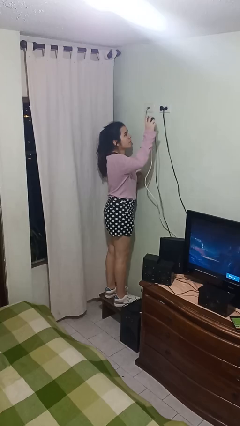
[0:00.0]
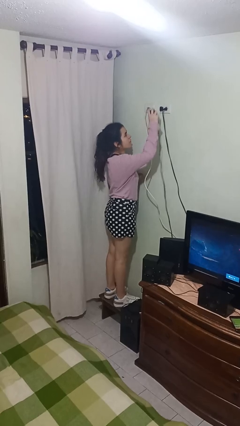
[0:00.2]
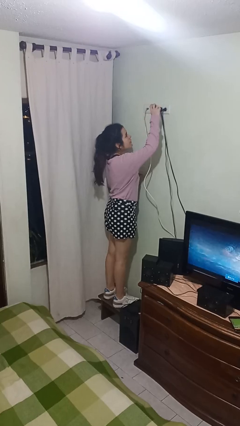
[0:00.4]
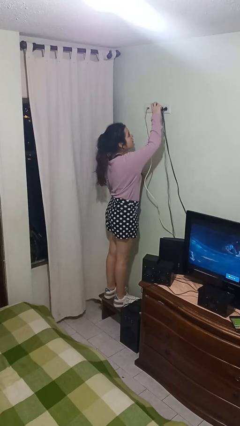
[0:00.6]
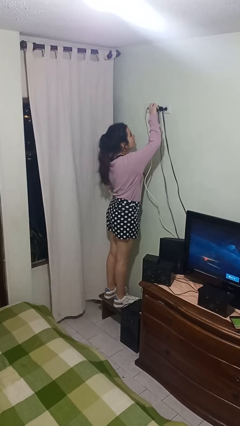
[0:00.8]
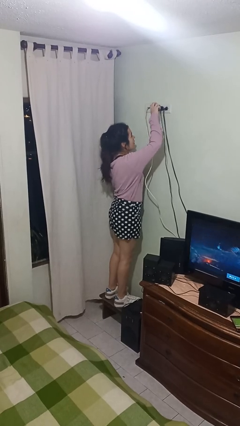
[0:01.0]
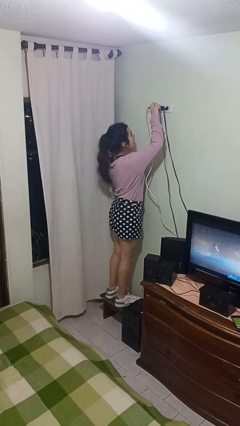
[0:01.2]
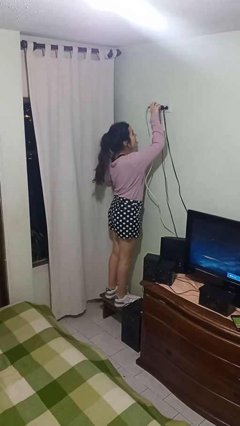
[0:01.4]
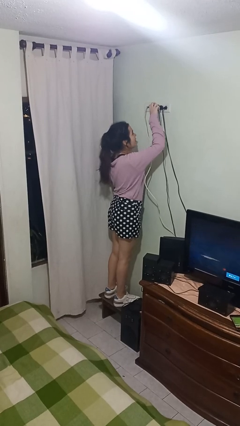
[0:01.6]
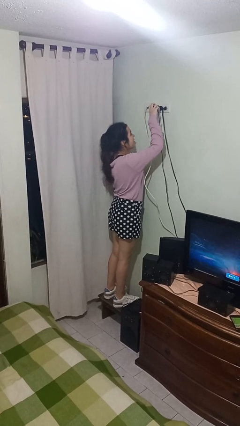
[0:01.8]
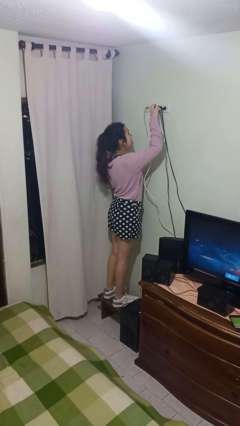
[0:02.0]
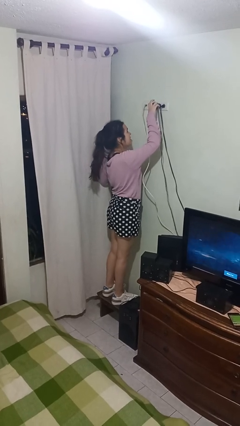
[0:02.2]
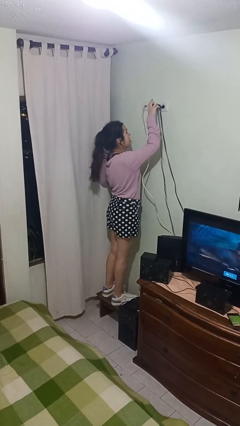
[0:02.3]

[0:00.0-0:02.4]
person plugs into electrical socket

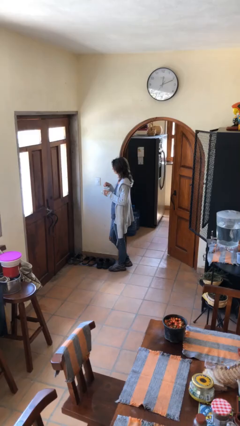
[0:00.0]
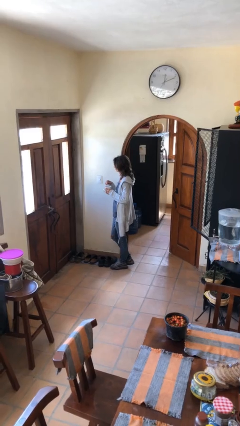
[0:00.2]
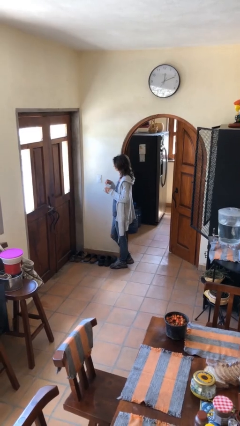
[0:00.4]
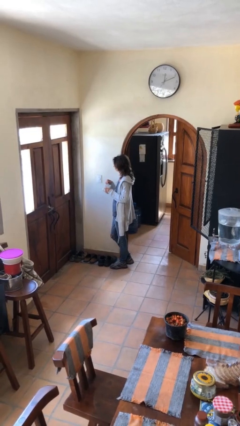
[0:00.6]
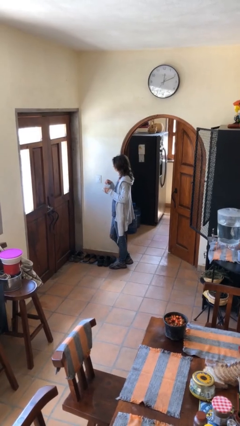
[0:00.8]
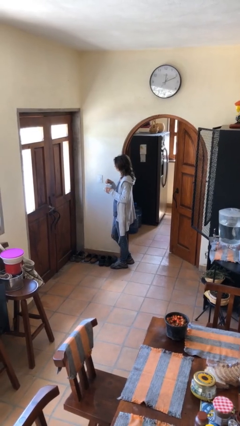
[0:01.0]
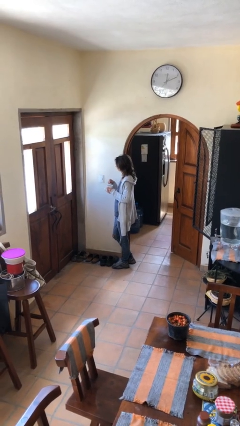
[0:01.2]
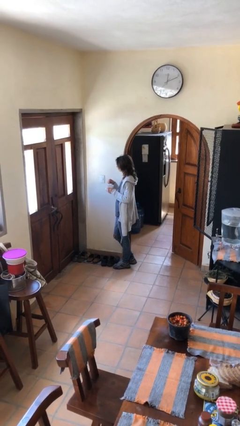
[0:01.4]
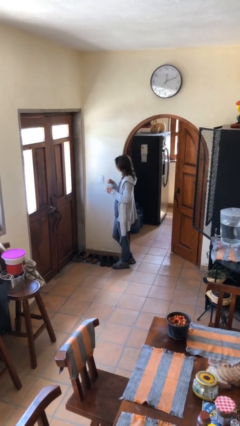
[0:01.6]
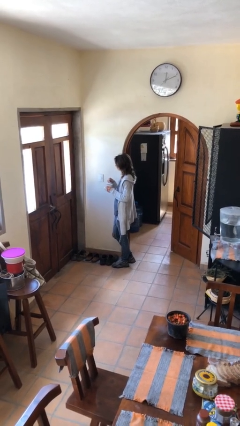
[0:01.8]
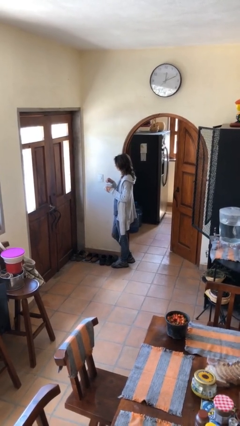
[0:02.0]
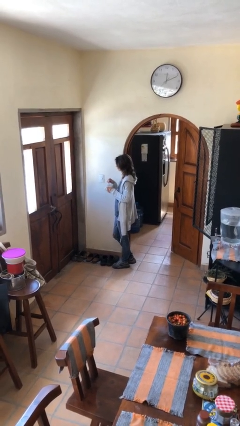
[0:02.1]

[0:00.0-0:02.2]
person stirs mug

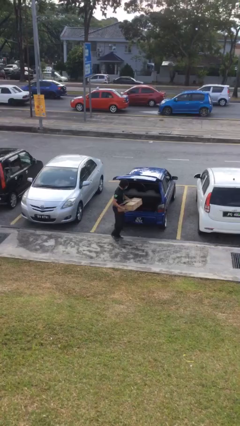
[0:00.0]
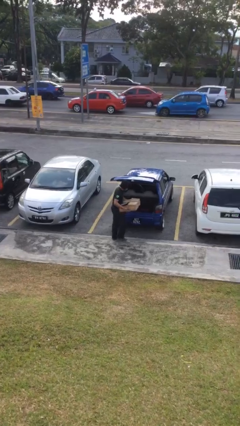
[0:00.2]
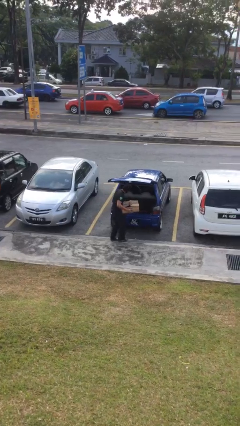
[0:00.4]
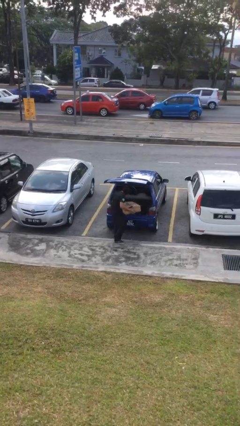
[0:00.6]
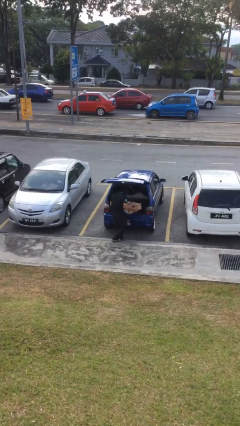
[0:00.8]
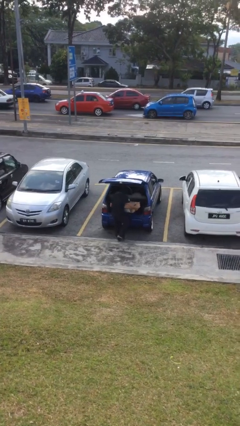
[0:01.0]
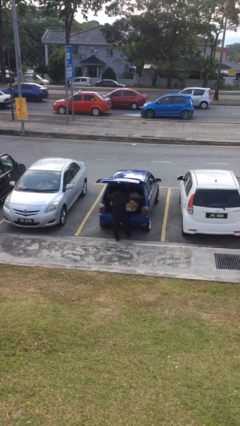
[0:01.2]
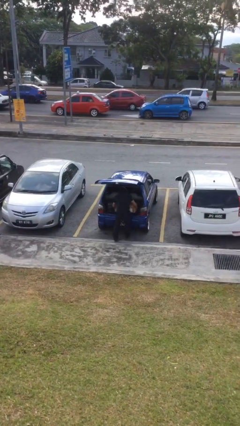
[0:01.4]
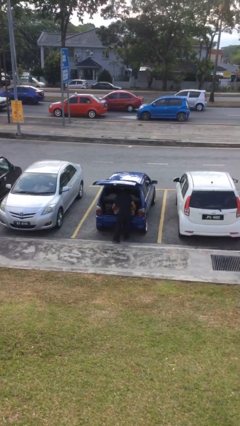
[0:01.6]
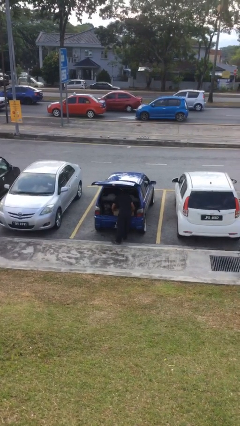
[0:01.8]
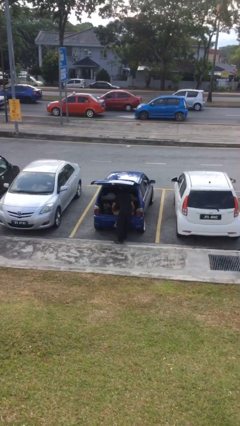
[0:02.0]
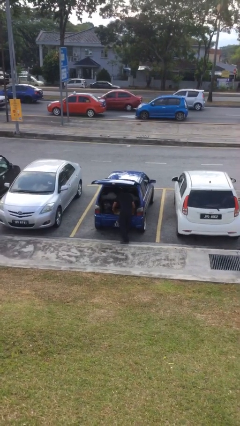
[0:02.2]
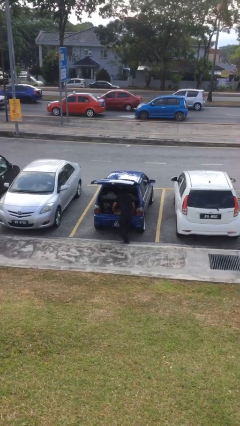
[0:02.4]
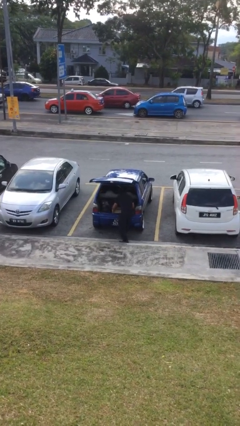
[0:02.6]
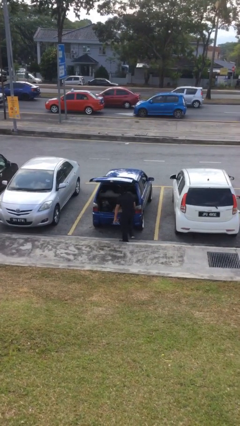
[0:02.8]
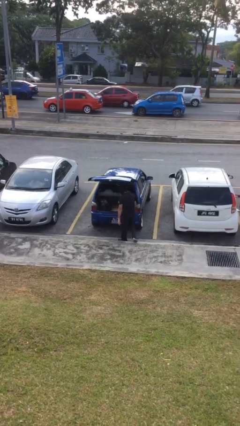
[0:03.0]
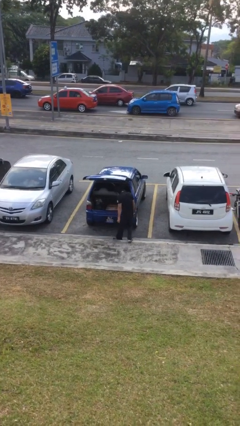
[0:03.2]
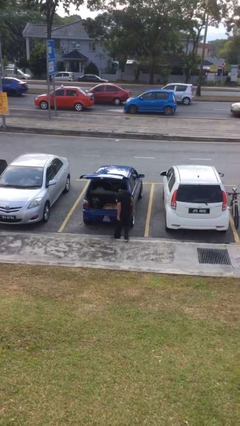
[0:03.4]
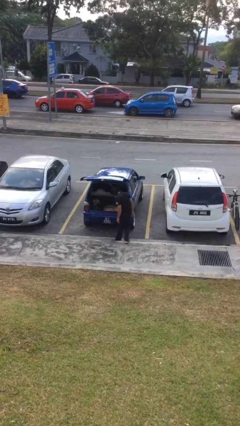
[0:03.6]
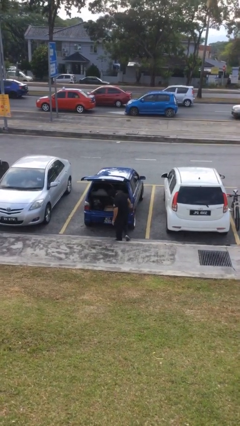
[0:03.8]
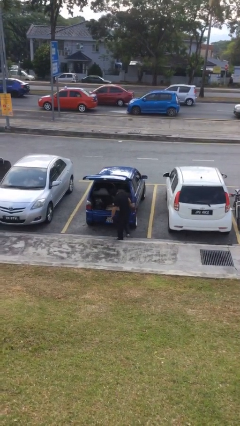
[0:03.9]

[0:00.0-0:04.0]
person loads car

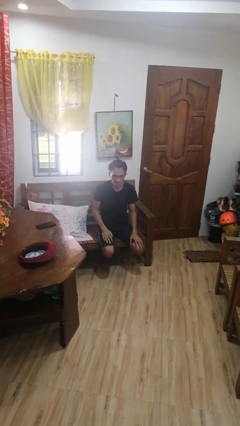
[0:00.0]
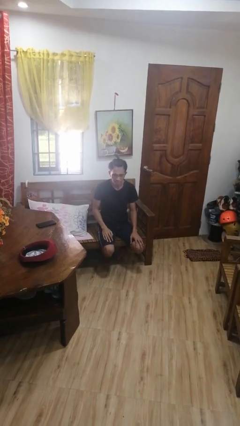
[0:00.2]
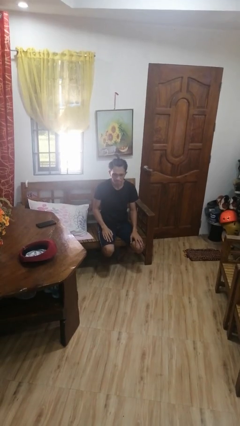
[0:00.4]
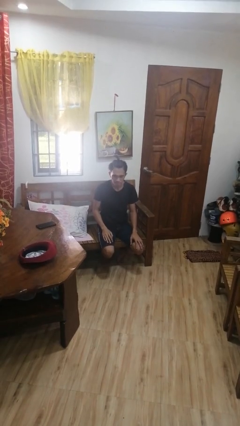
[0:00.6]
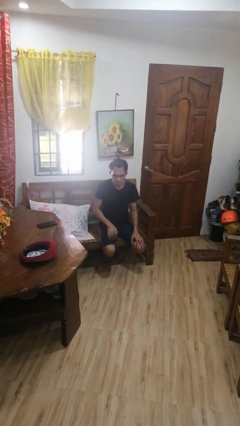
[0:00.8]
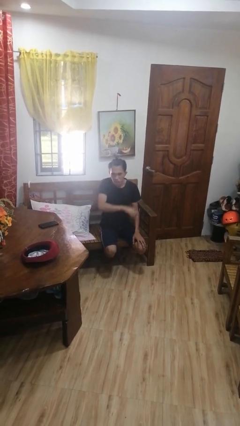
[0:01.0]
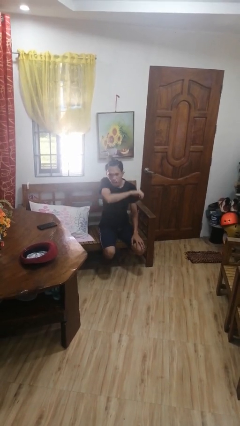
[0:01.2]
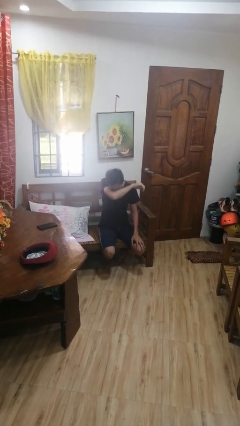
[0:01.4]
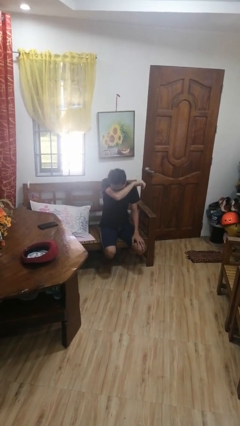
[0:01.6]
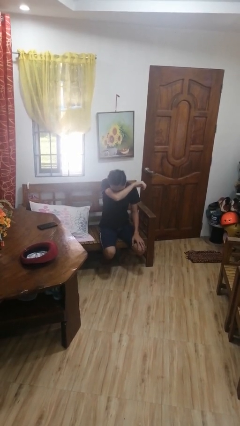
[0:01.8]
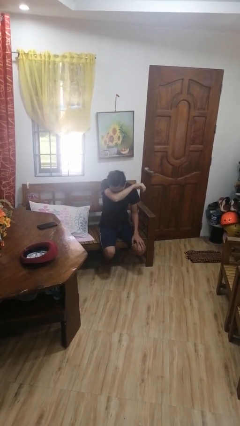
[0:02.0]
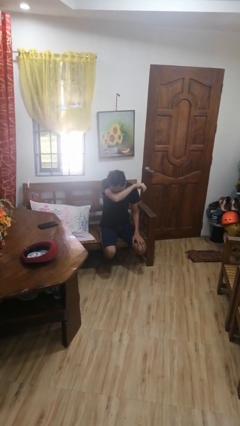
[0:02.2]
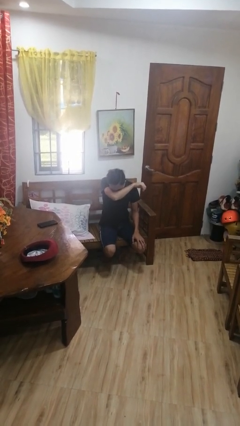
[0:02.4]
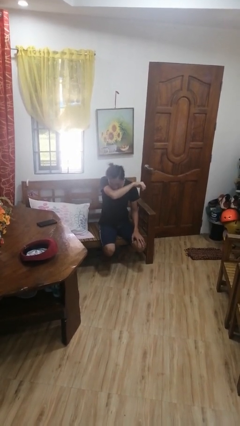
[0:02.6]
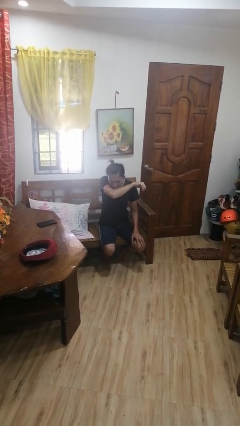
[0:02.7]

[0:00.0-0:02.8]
person sneezes into arm

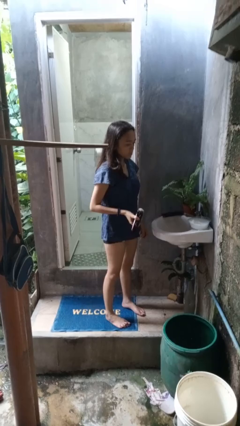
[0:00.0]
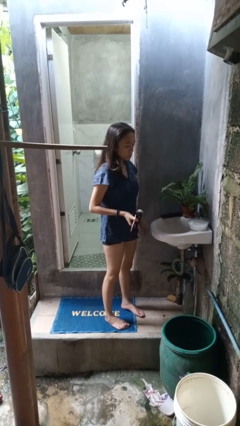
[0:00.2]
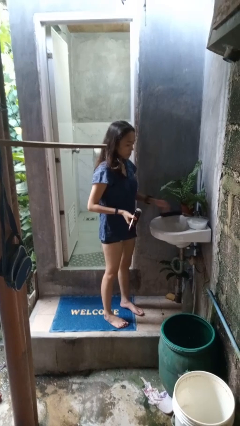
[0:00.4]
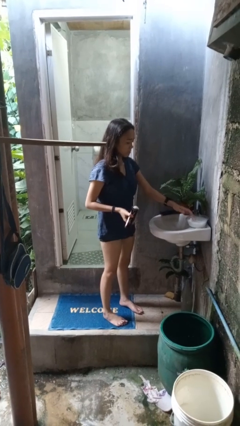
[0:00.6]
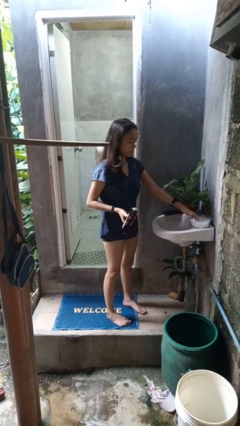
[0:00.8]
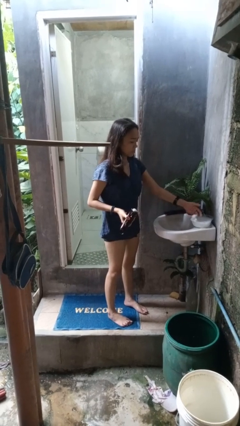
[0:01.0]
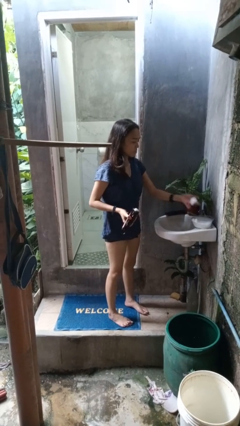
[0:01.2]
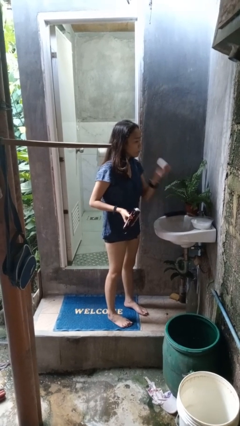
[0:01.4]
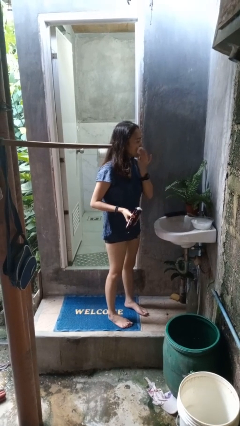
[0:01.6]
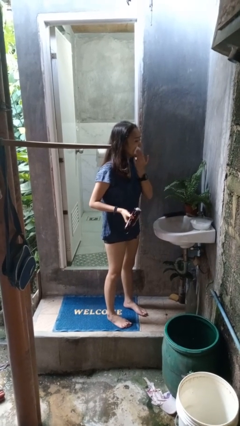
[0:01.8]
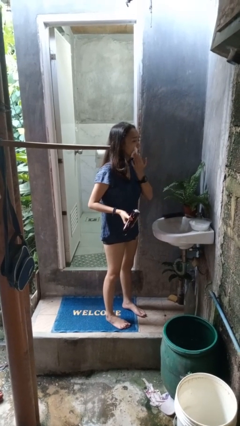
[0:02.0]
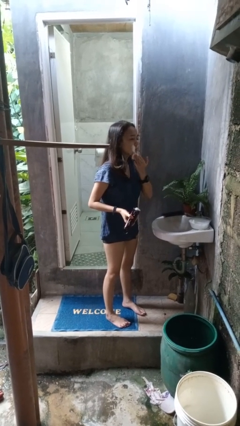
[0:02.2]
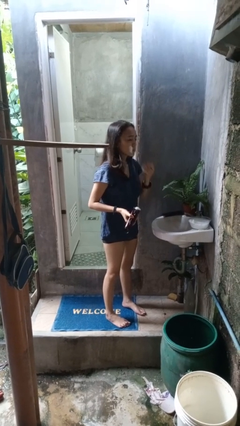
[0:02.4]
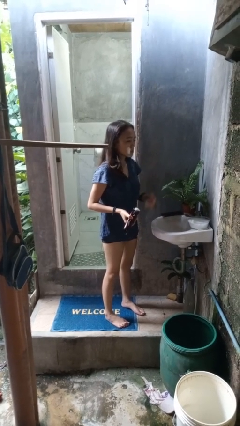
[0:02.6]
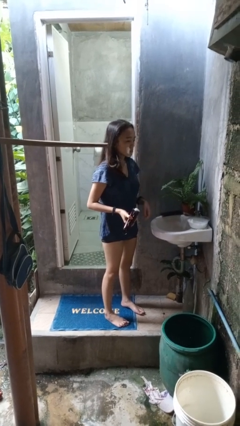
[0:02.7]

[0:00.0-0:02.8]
person applies shaving cream

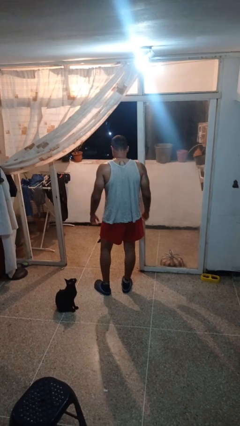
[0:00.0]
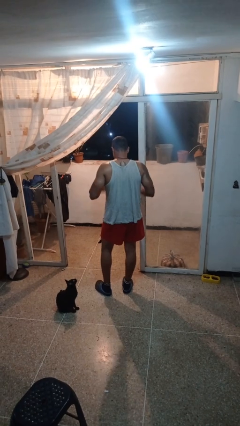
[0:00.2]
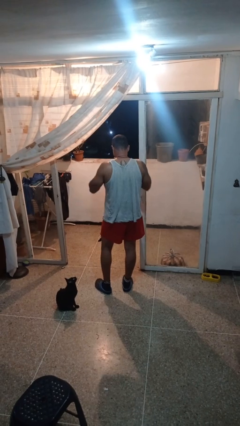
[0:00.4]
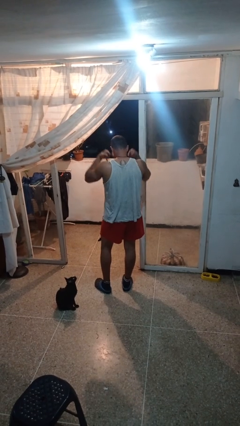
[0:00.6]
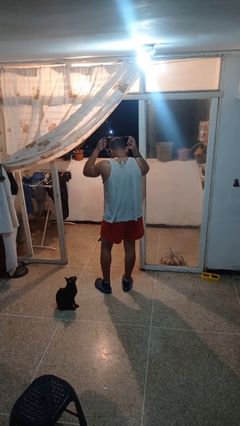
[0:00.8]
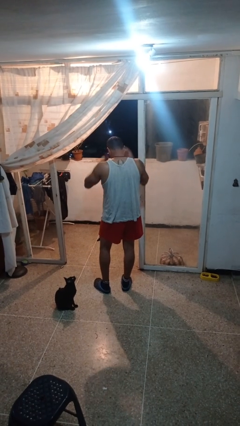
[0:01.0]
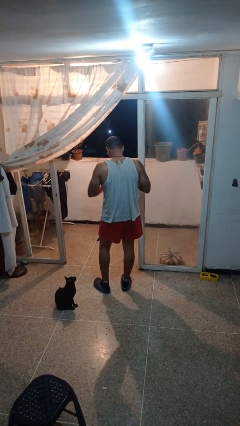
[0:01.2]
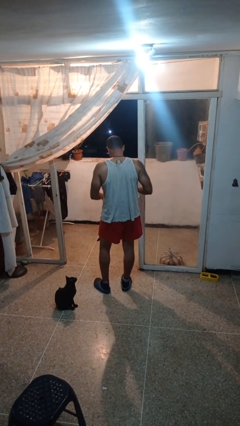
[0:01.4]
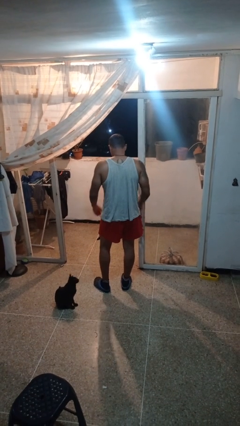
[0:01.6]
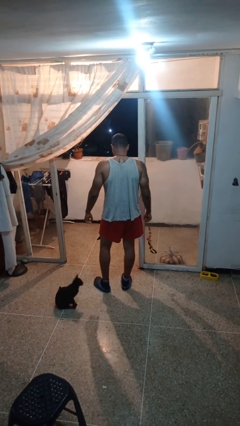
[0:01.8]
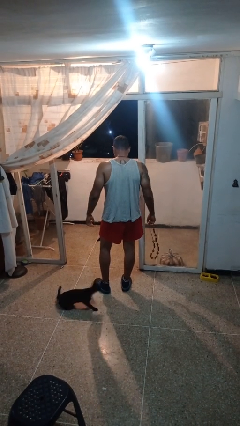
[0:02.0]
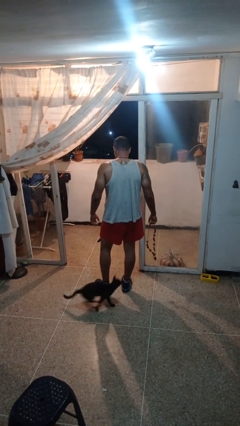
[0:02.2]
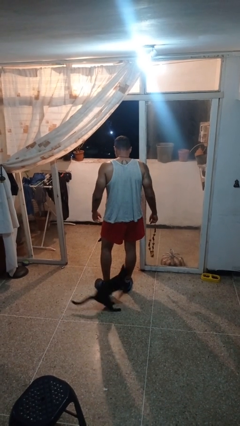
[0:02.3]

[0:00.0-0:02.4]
person takes off necklace

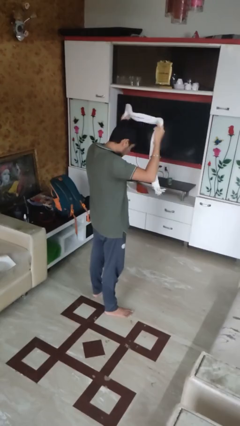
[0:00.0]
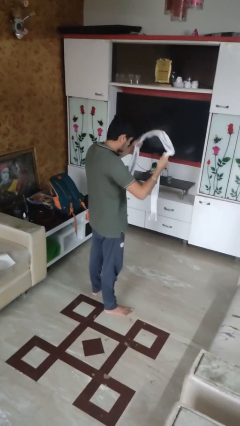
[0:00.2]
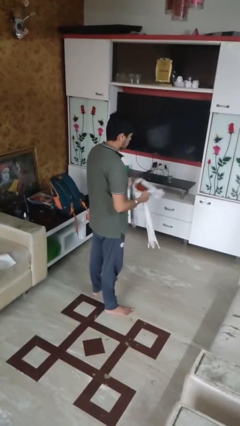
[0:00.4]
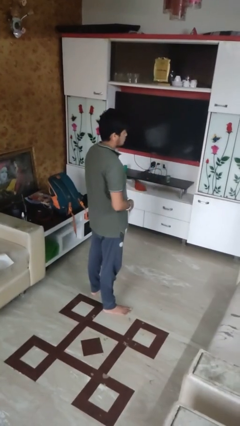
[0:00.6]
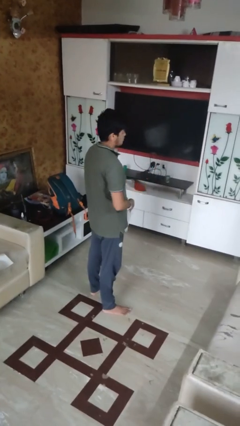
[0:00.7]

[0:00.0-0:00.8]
person takes off scarf
